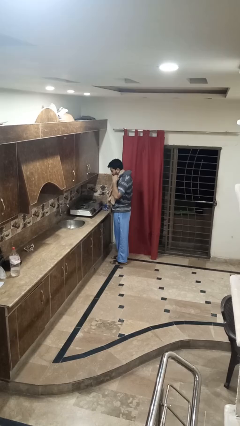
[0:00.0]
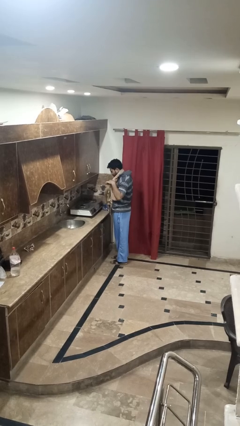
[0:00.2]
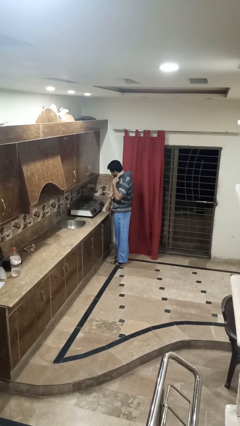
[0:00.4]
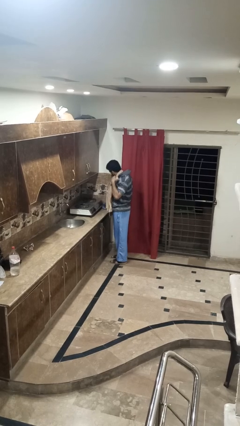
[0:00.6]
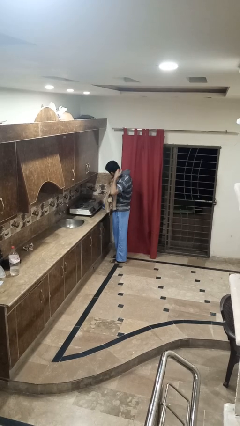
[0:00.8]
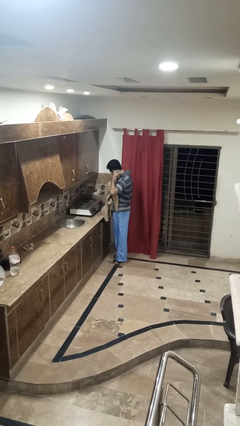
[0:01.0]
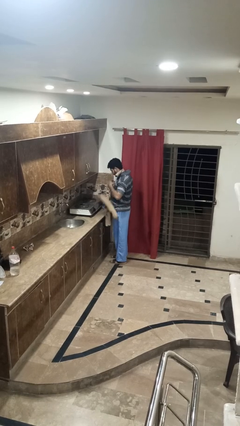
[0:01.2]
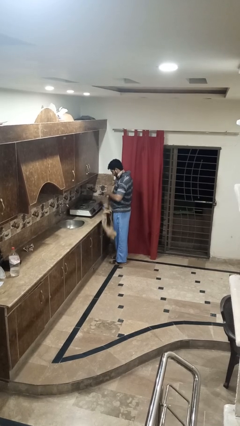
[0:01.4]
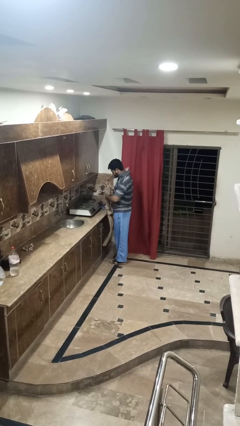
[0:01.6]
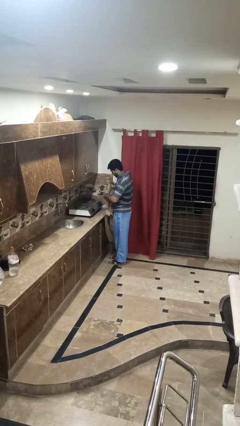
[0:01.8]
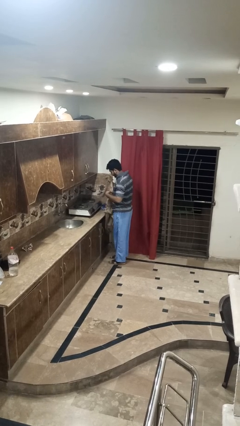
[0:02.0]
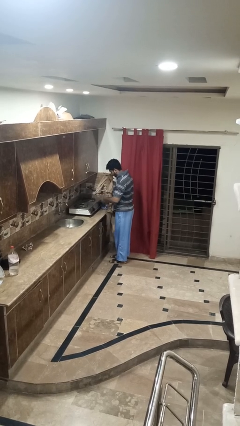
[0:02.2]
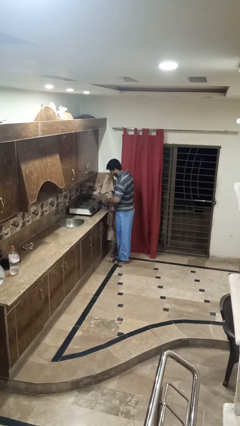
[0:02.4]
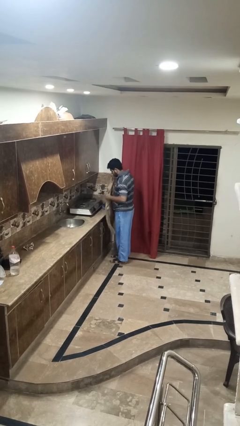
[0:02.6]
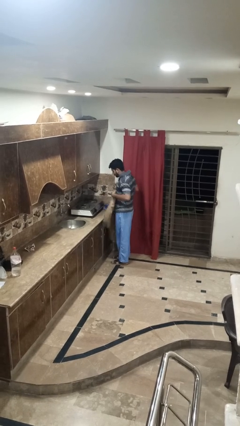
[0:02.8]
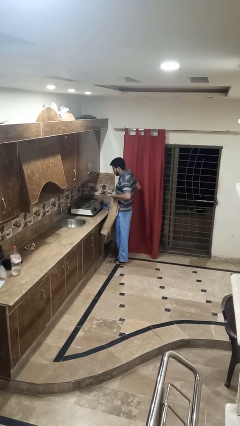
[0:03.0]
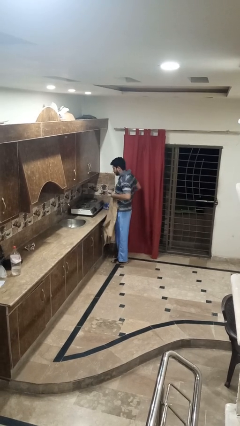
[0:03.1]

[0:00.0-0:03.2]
person takes off apron

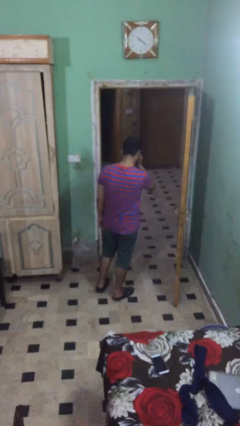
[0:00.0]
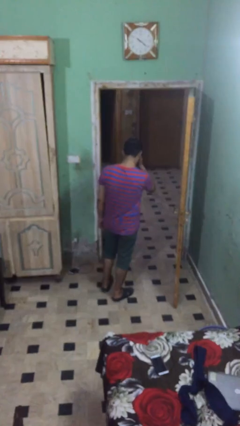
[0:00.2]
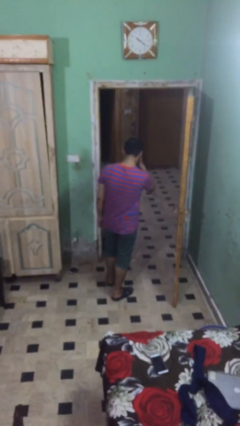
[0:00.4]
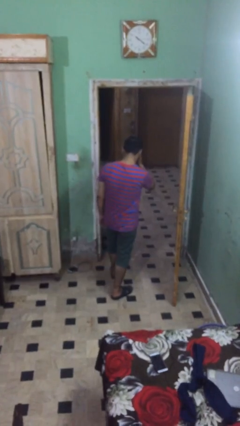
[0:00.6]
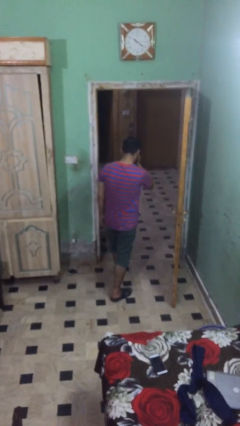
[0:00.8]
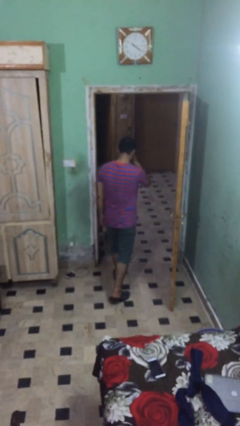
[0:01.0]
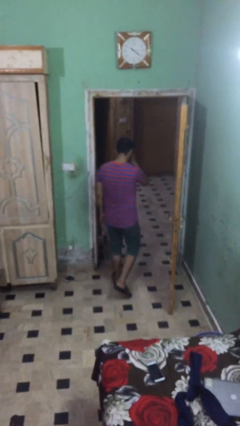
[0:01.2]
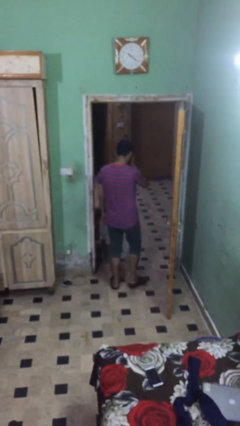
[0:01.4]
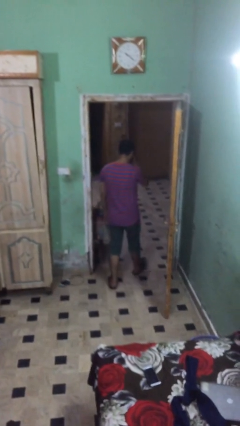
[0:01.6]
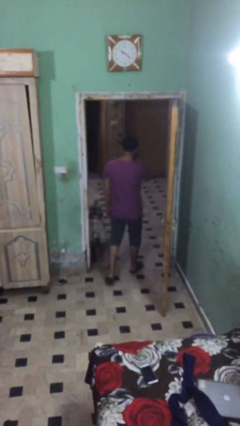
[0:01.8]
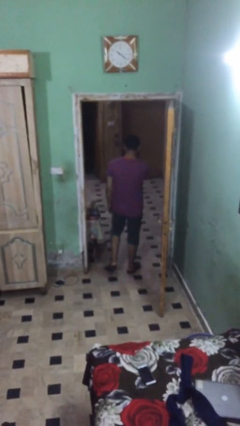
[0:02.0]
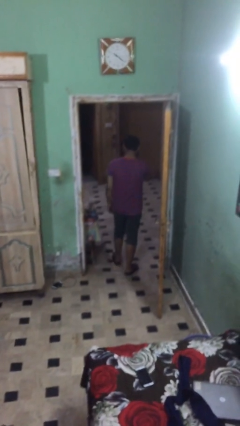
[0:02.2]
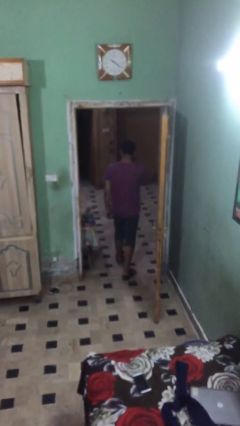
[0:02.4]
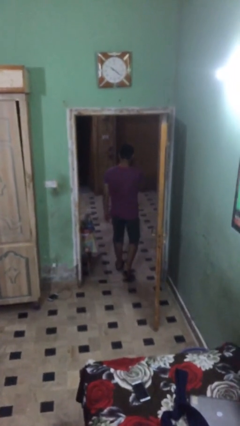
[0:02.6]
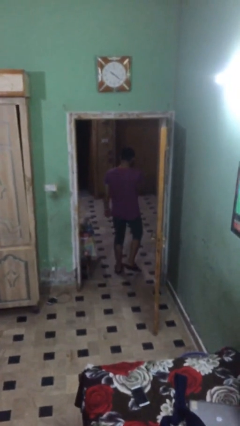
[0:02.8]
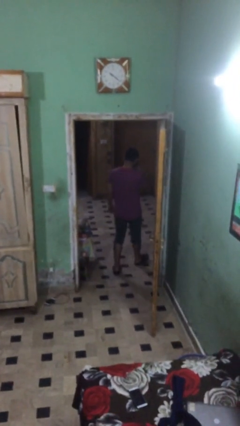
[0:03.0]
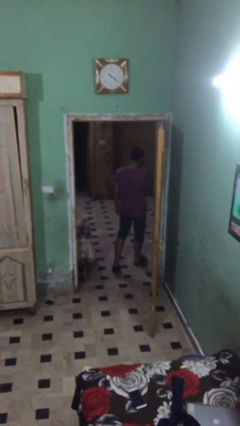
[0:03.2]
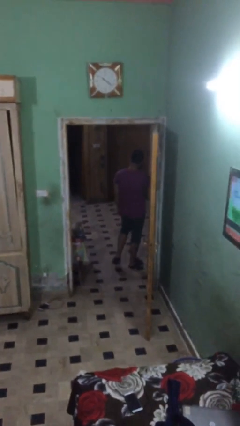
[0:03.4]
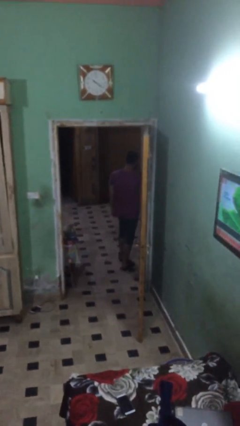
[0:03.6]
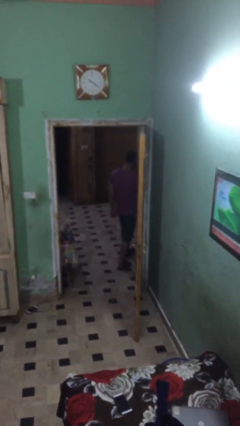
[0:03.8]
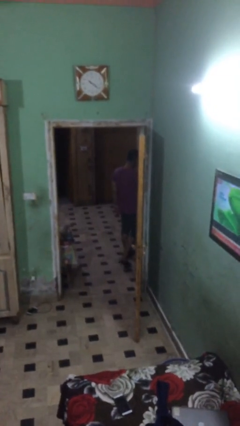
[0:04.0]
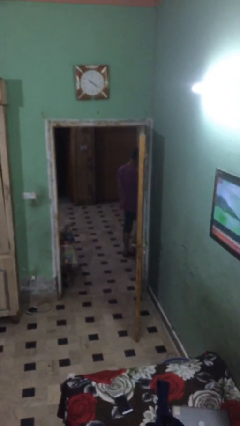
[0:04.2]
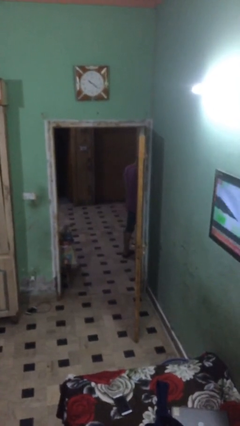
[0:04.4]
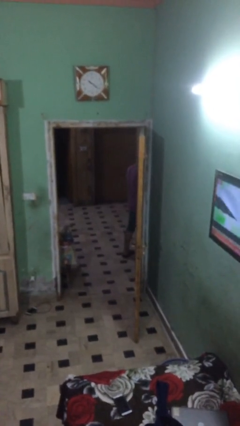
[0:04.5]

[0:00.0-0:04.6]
person exits scene through structure

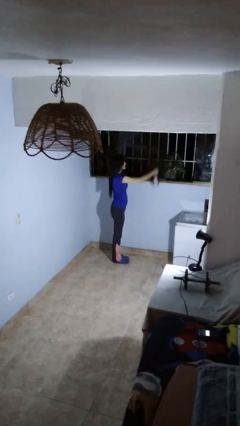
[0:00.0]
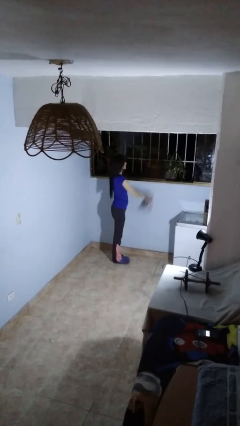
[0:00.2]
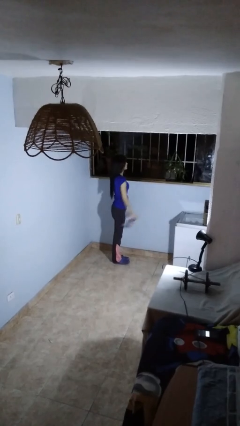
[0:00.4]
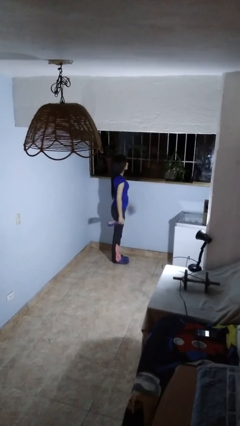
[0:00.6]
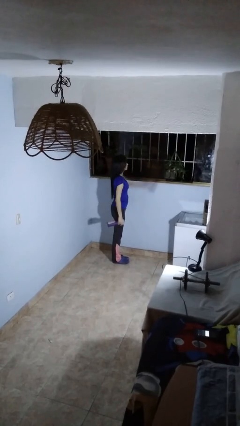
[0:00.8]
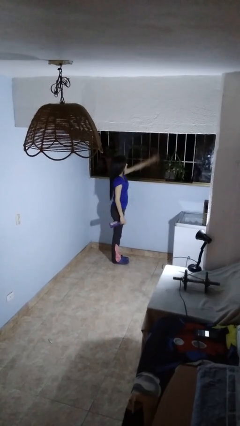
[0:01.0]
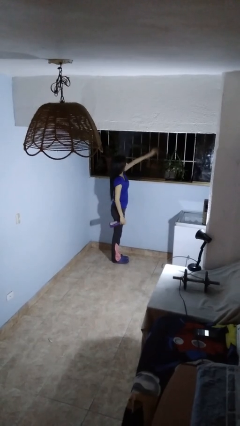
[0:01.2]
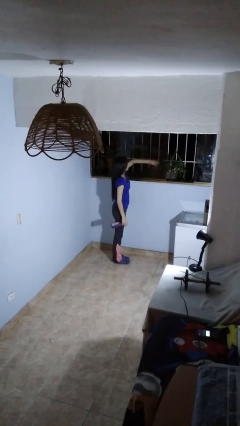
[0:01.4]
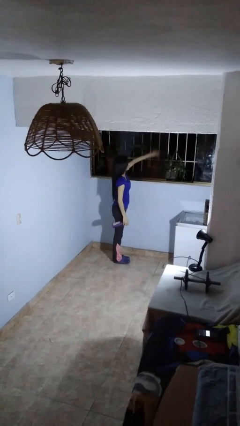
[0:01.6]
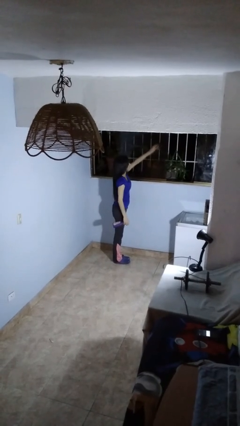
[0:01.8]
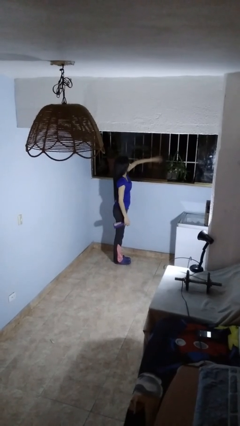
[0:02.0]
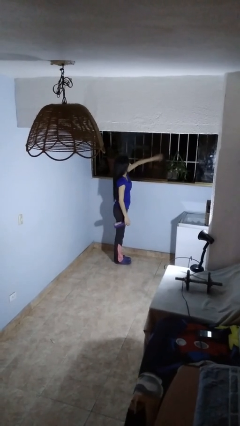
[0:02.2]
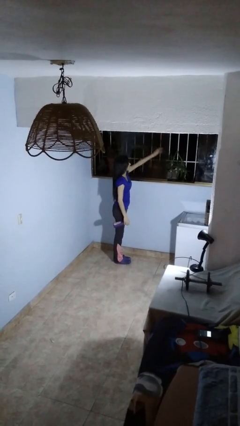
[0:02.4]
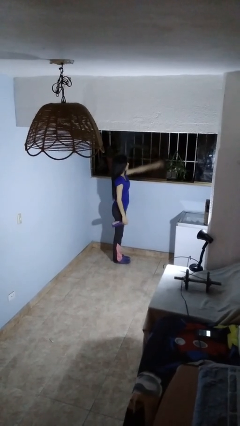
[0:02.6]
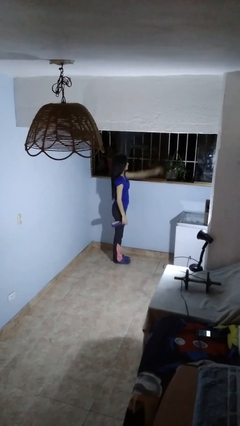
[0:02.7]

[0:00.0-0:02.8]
person washes window

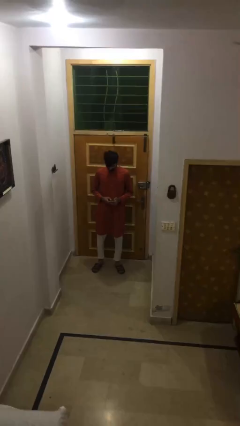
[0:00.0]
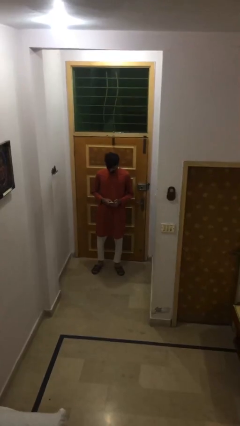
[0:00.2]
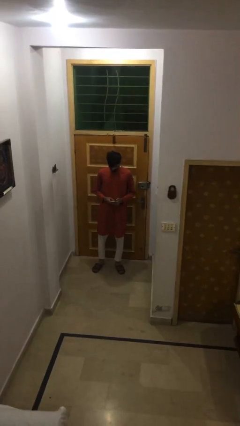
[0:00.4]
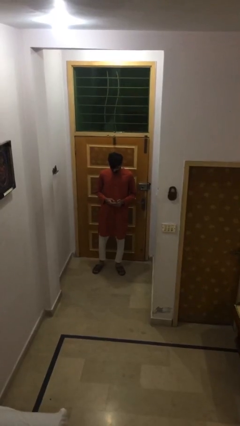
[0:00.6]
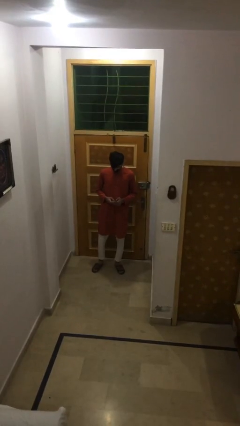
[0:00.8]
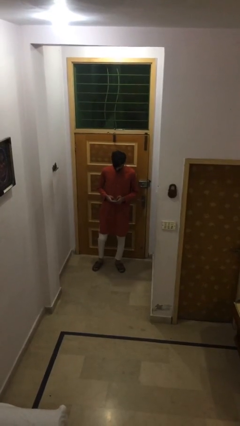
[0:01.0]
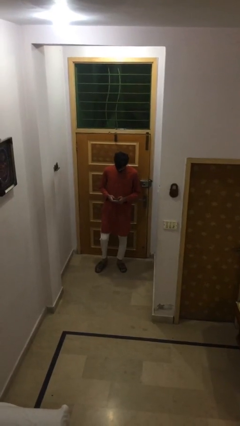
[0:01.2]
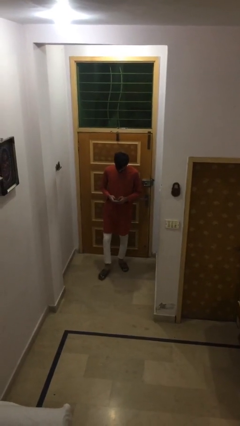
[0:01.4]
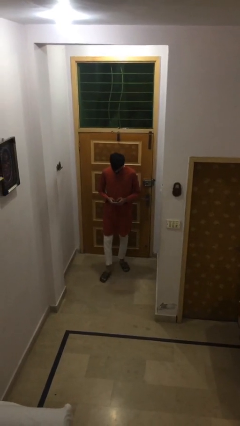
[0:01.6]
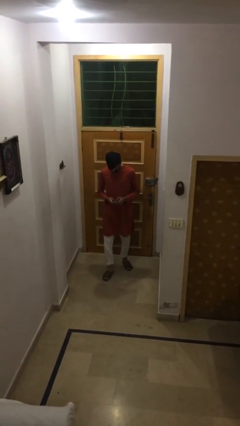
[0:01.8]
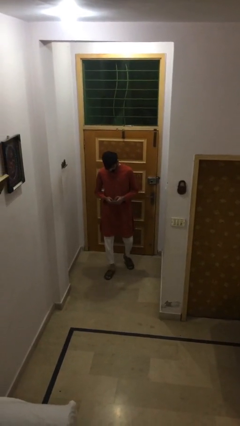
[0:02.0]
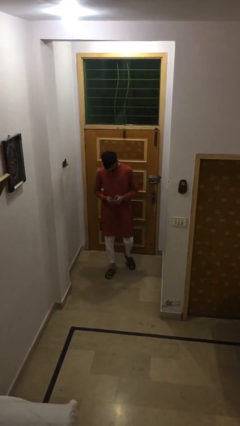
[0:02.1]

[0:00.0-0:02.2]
person texts on phone

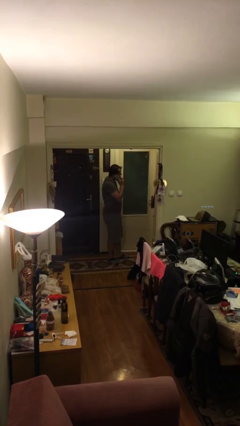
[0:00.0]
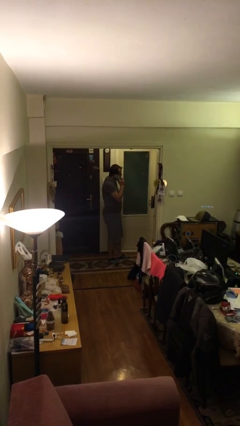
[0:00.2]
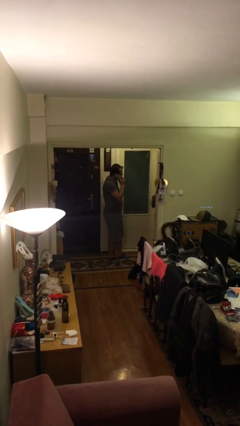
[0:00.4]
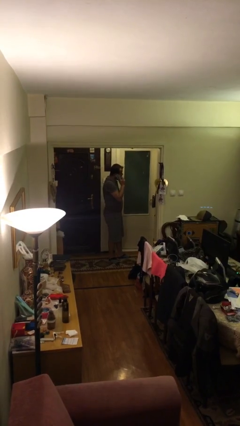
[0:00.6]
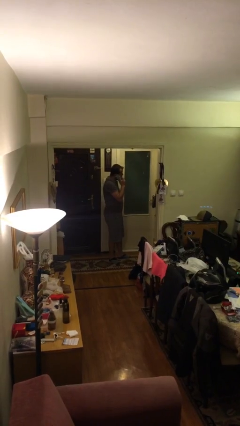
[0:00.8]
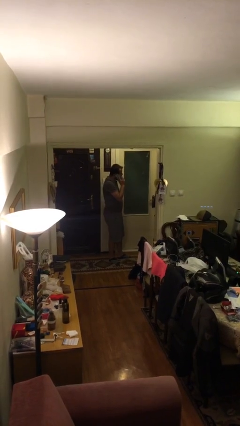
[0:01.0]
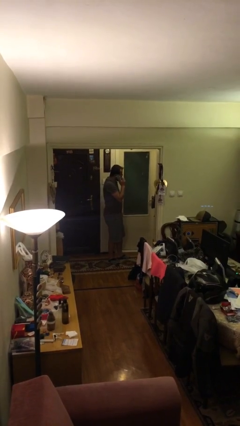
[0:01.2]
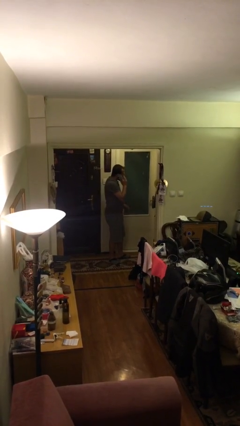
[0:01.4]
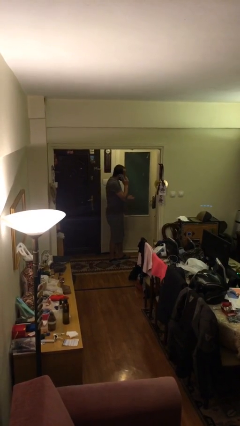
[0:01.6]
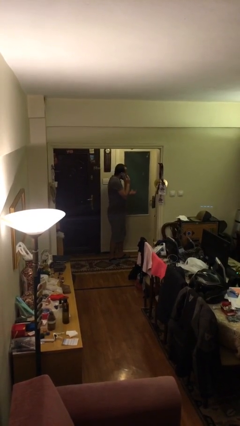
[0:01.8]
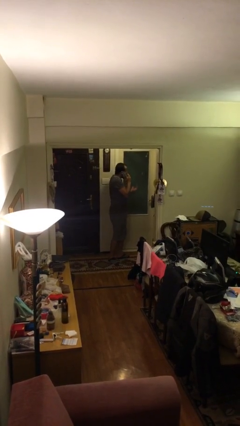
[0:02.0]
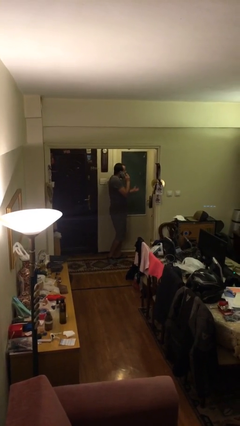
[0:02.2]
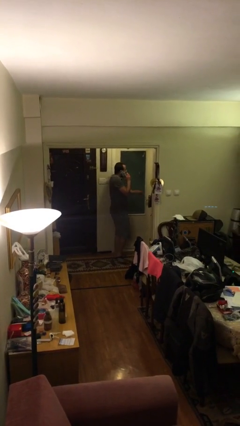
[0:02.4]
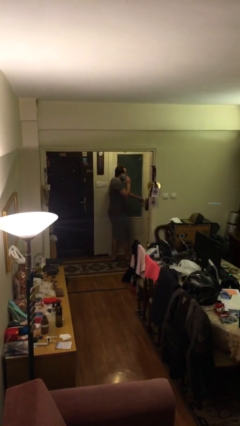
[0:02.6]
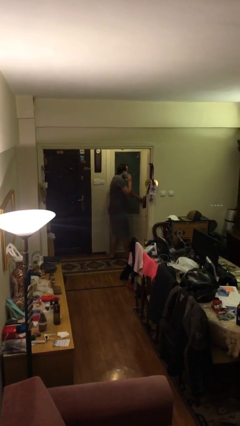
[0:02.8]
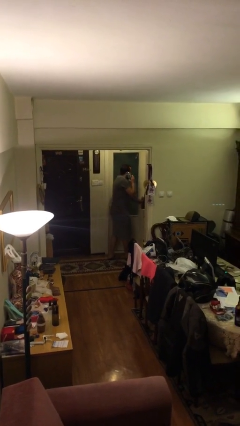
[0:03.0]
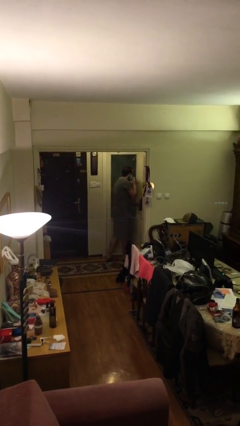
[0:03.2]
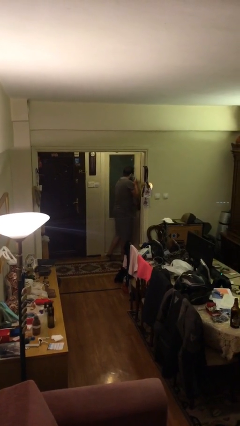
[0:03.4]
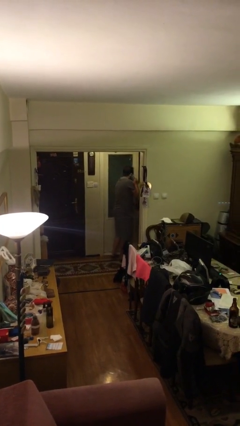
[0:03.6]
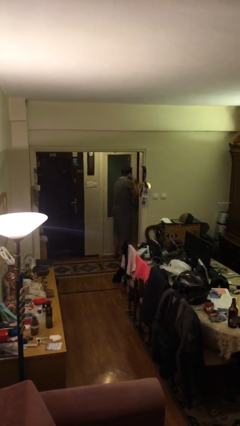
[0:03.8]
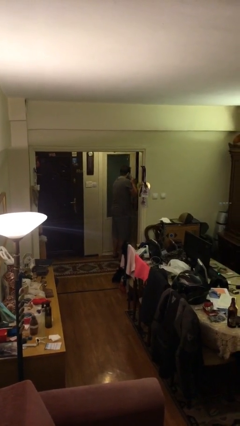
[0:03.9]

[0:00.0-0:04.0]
person opens facility door

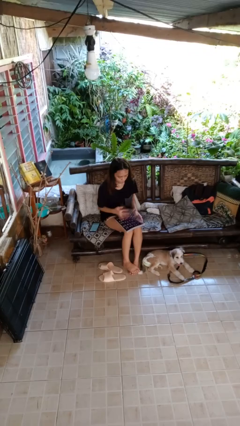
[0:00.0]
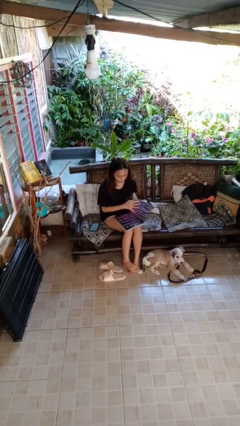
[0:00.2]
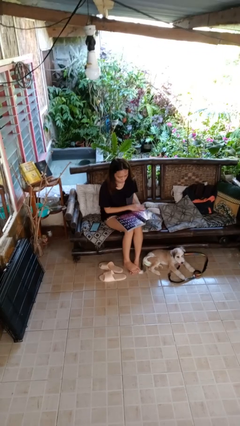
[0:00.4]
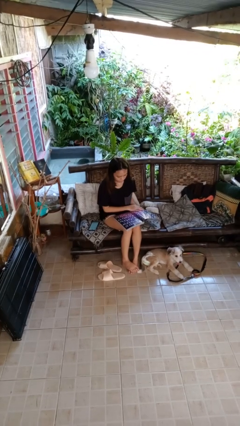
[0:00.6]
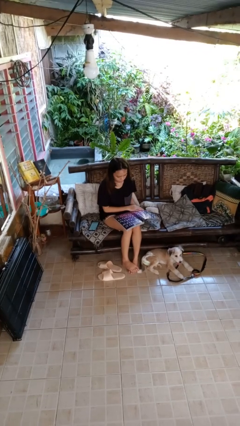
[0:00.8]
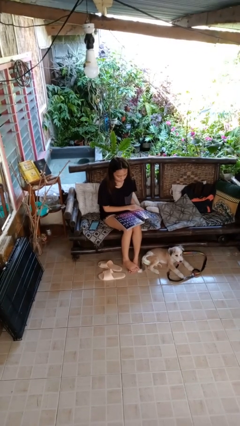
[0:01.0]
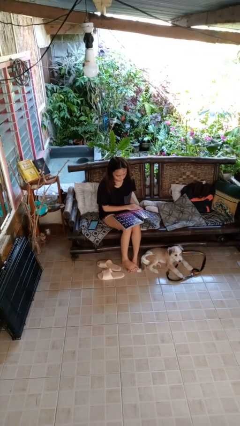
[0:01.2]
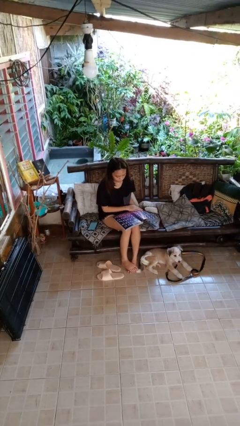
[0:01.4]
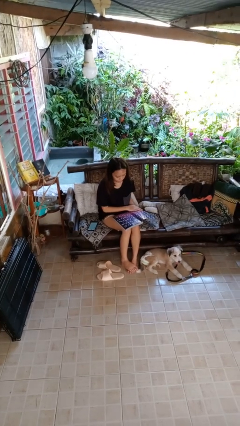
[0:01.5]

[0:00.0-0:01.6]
person reads magazine
